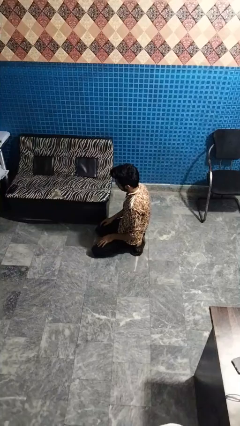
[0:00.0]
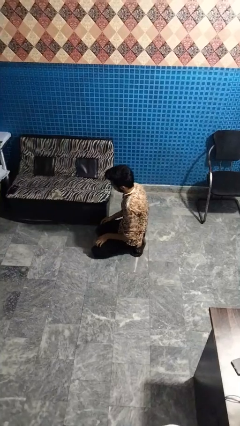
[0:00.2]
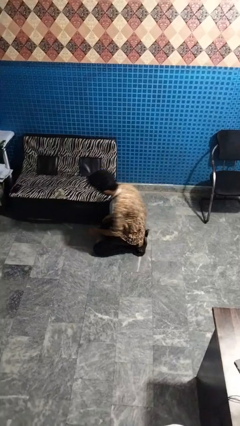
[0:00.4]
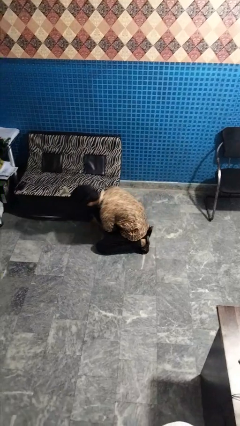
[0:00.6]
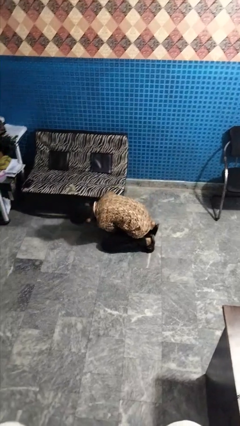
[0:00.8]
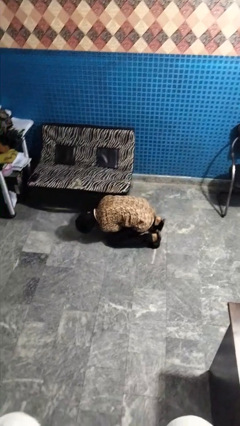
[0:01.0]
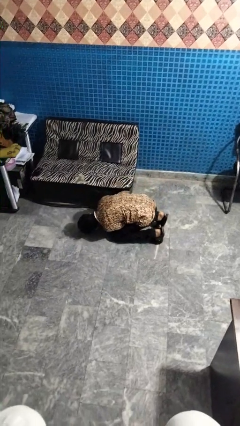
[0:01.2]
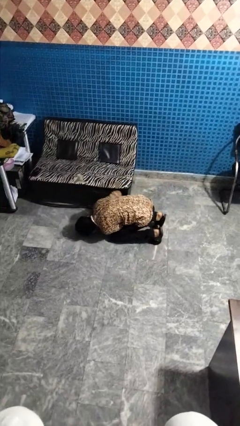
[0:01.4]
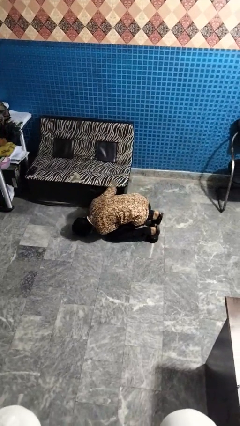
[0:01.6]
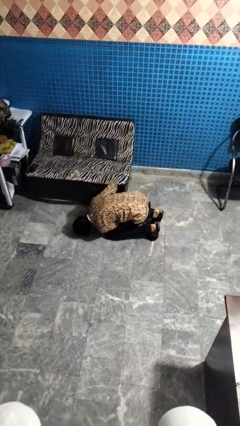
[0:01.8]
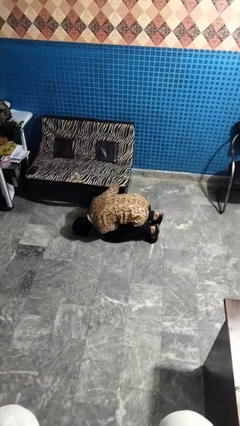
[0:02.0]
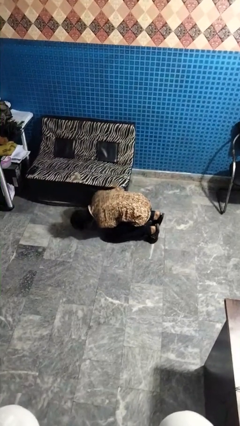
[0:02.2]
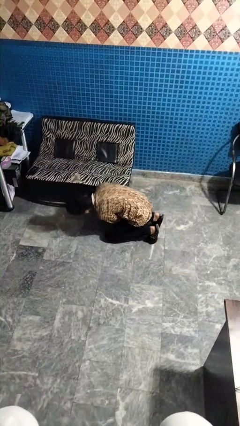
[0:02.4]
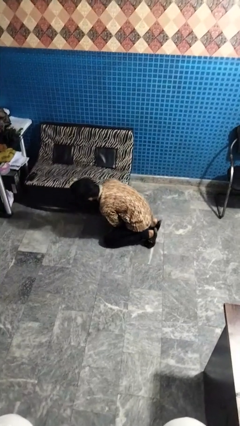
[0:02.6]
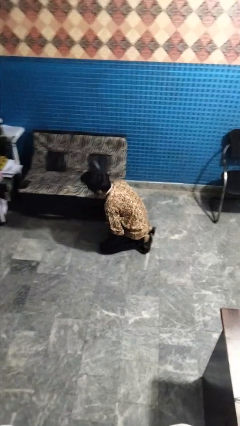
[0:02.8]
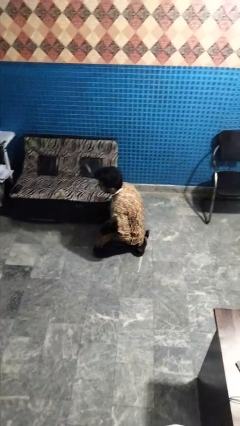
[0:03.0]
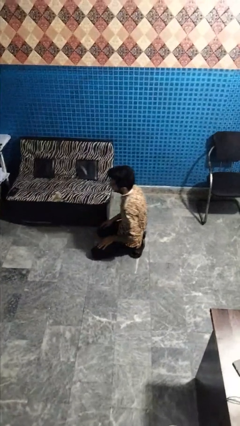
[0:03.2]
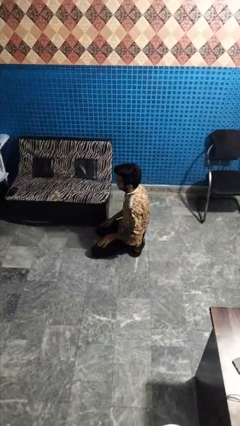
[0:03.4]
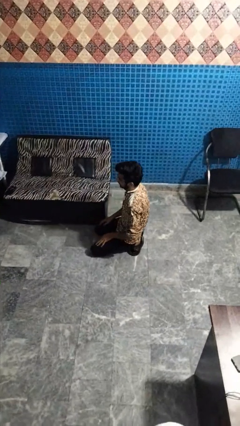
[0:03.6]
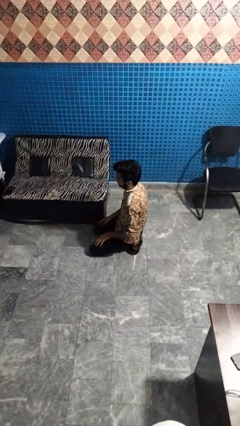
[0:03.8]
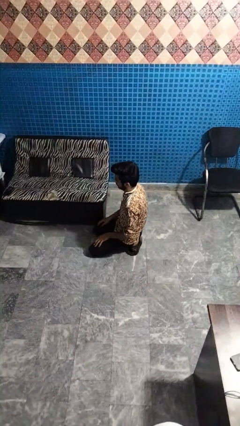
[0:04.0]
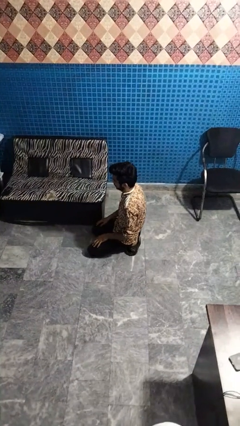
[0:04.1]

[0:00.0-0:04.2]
person searches under couch

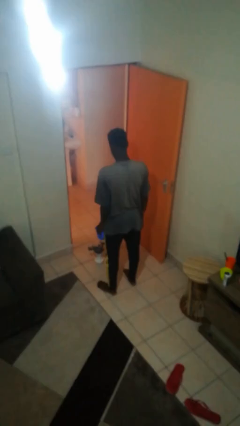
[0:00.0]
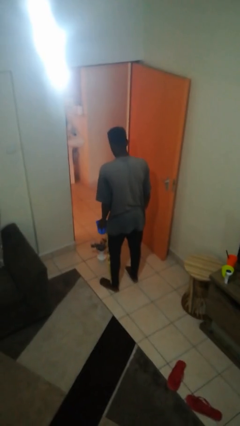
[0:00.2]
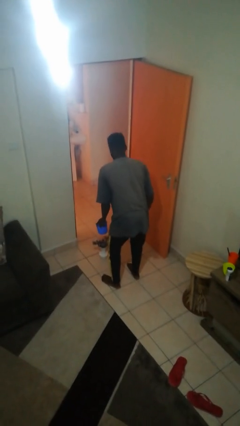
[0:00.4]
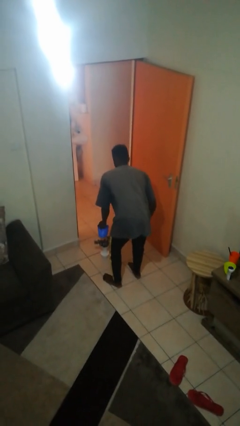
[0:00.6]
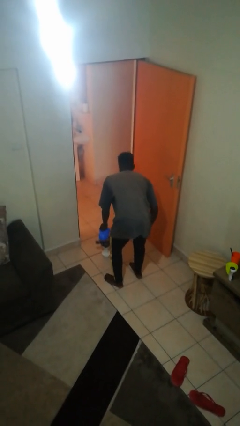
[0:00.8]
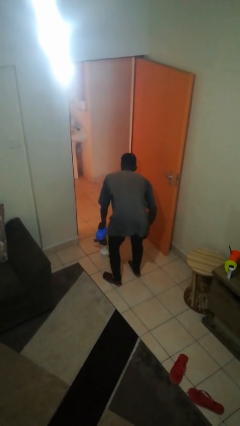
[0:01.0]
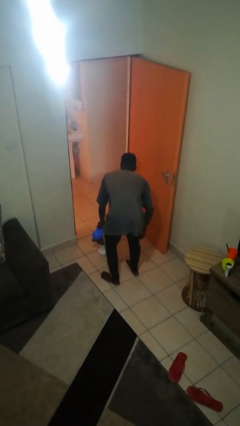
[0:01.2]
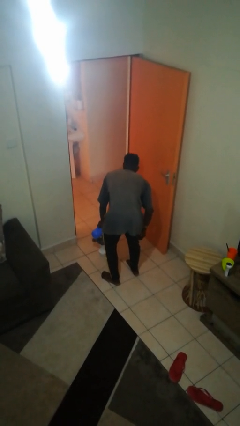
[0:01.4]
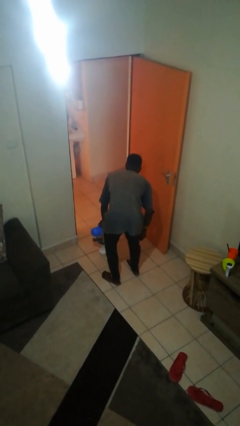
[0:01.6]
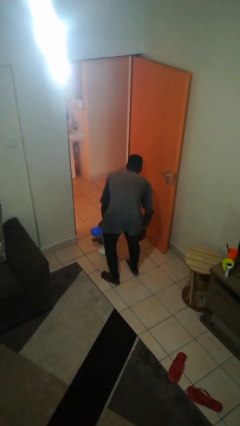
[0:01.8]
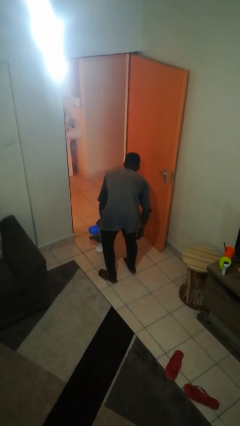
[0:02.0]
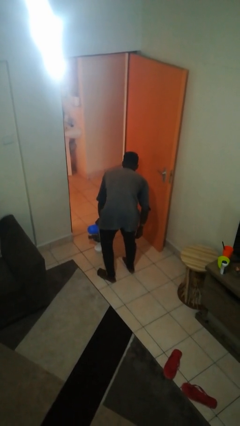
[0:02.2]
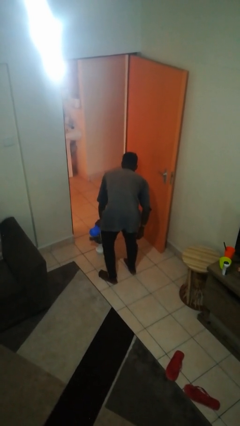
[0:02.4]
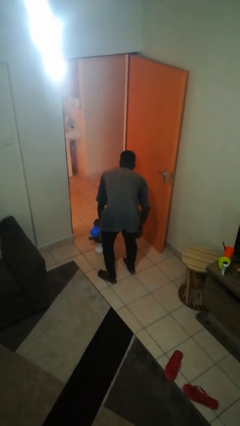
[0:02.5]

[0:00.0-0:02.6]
person waters houseplant

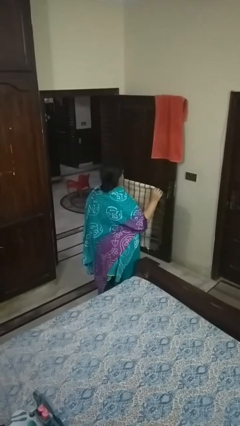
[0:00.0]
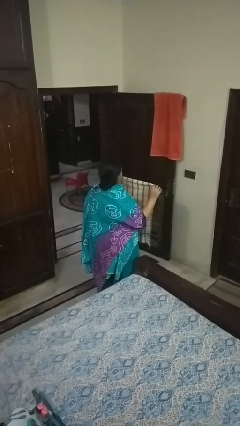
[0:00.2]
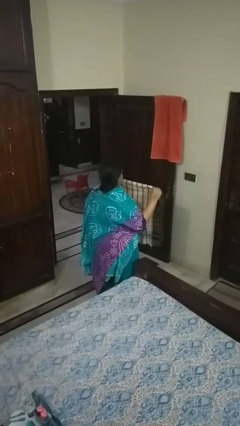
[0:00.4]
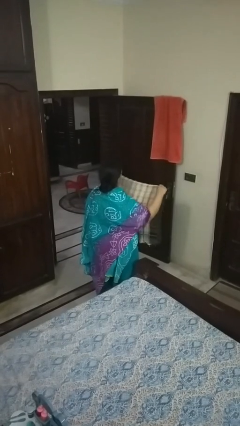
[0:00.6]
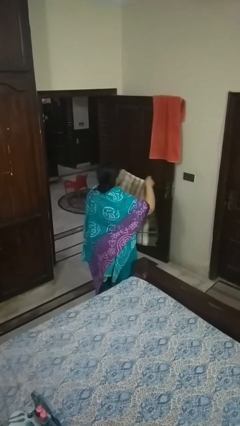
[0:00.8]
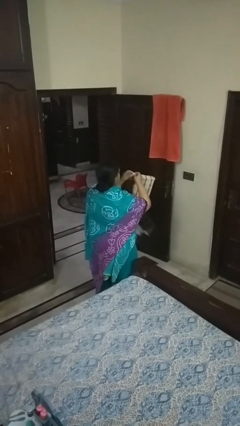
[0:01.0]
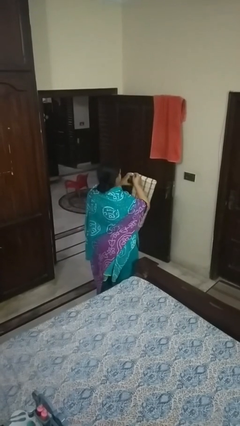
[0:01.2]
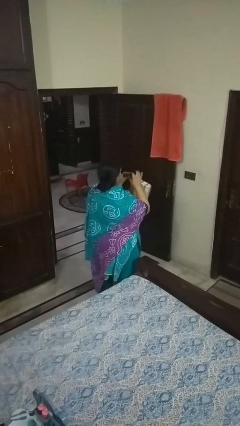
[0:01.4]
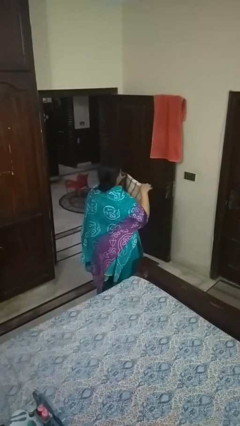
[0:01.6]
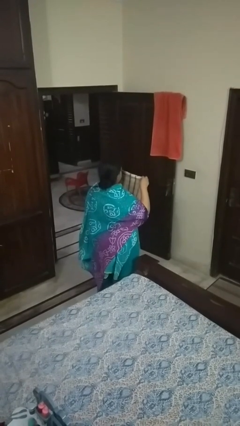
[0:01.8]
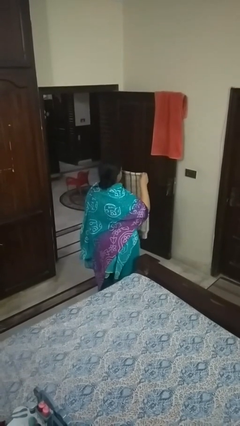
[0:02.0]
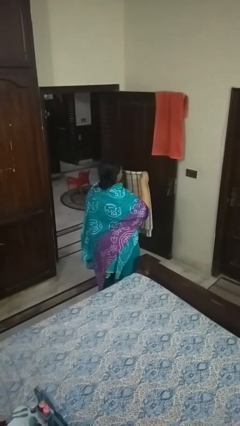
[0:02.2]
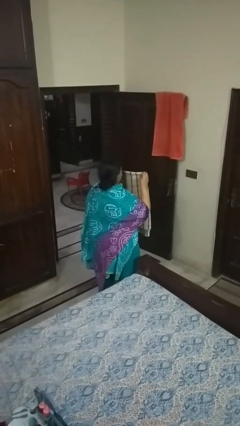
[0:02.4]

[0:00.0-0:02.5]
person folds blanket

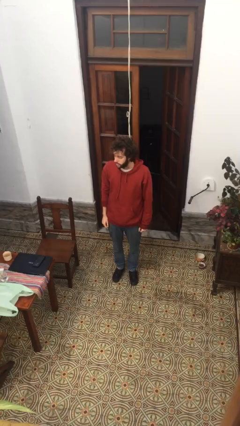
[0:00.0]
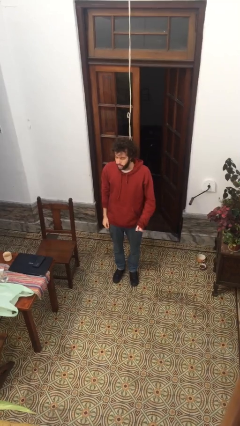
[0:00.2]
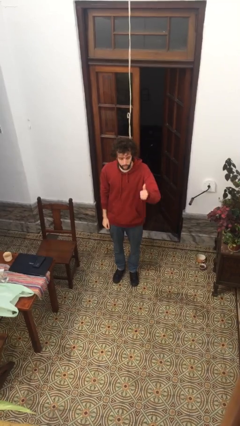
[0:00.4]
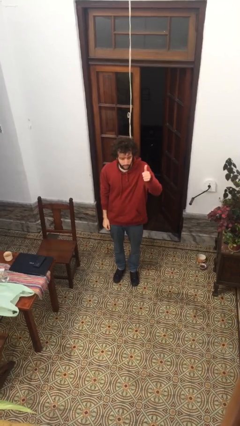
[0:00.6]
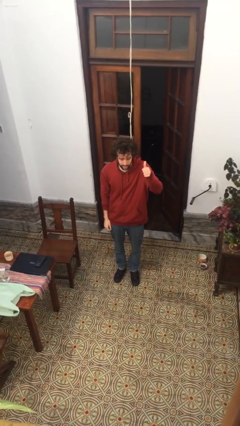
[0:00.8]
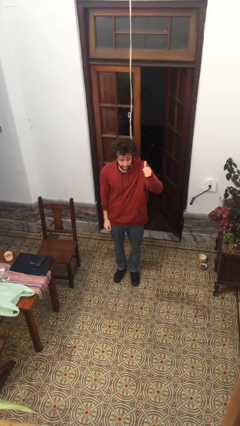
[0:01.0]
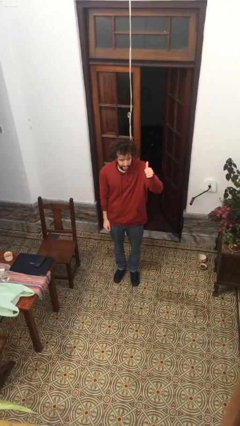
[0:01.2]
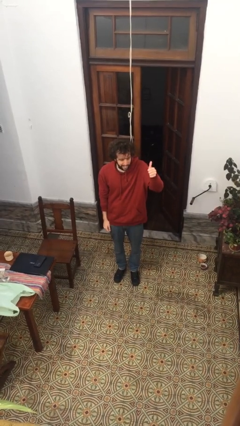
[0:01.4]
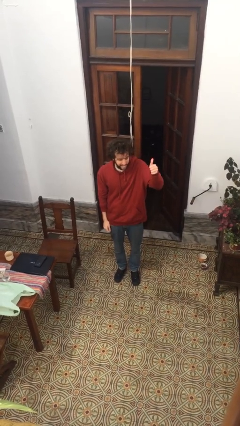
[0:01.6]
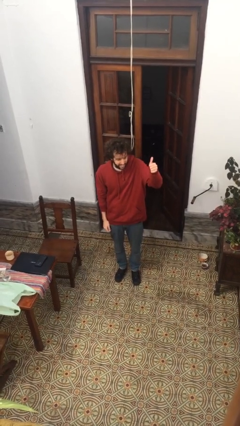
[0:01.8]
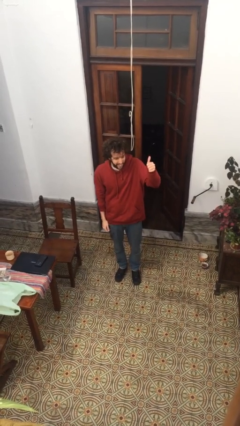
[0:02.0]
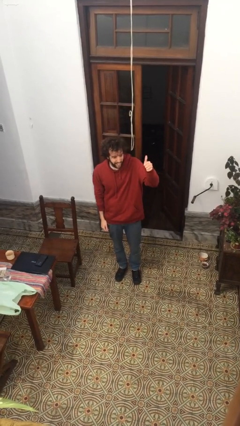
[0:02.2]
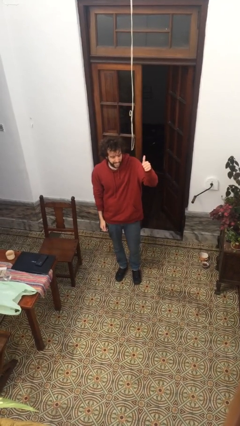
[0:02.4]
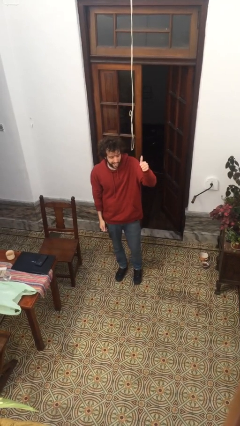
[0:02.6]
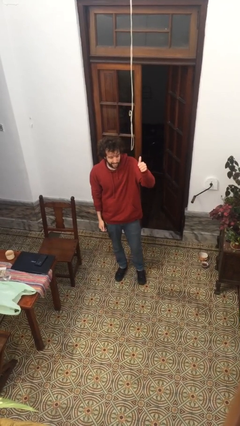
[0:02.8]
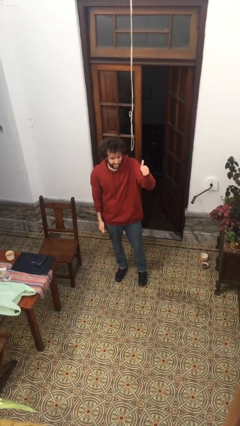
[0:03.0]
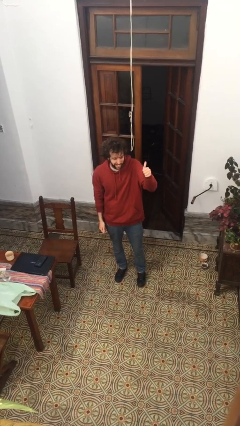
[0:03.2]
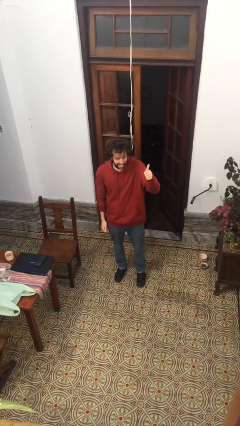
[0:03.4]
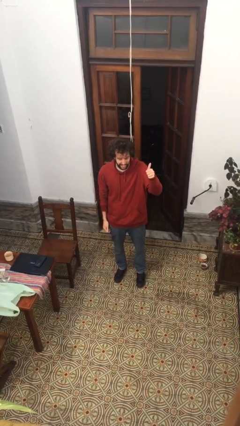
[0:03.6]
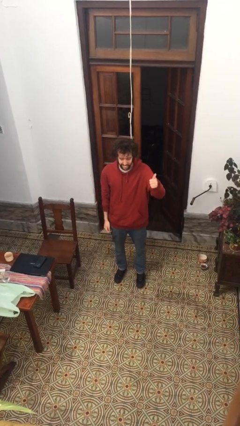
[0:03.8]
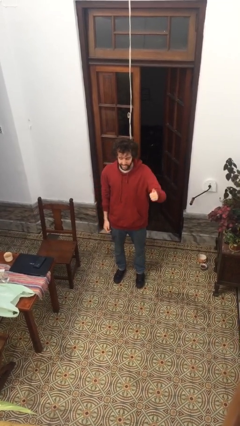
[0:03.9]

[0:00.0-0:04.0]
person gestures thumbs up

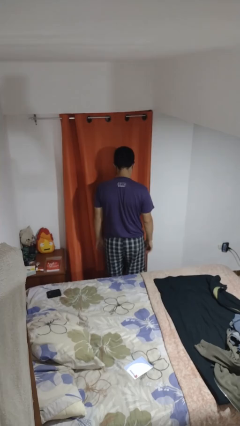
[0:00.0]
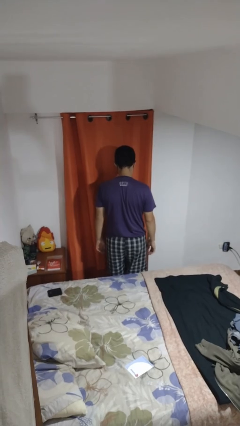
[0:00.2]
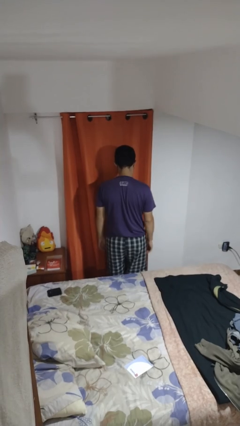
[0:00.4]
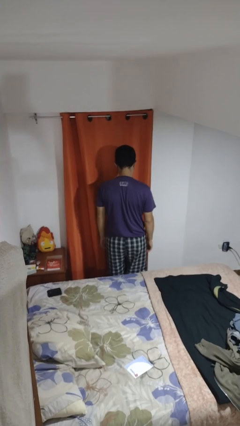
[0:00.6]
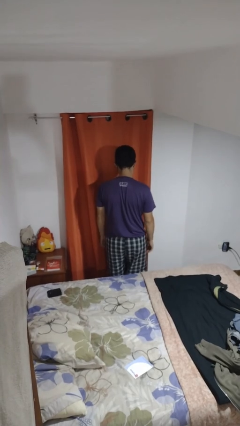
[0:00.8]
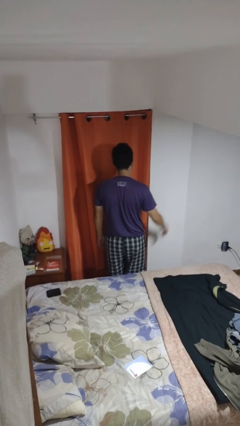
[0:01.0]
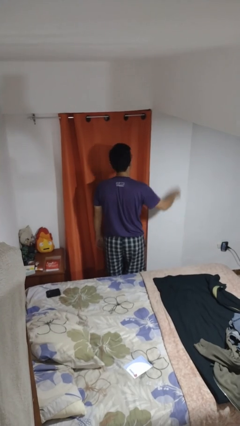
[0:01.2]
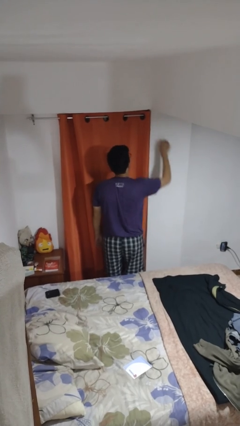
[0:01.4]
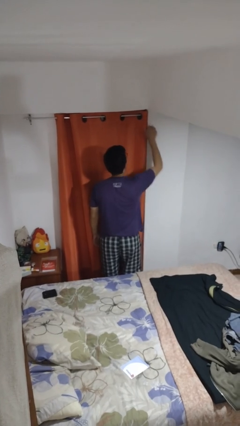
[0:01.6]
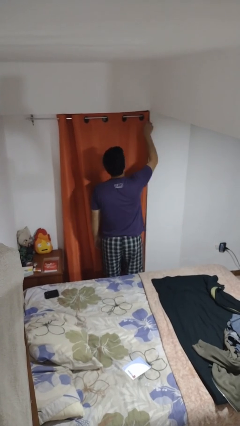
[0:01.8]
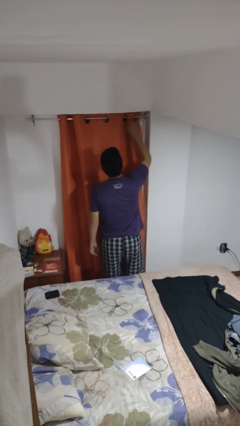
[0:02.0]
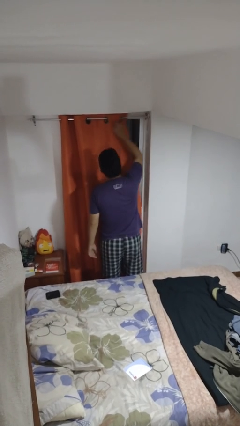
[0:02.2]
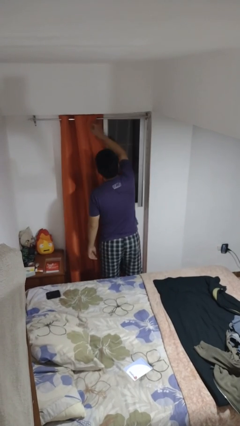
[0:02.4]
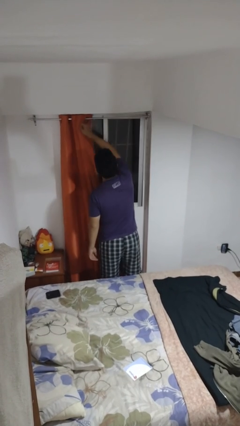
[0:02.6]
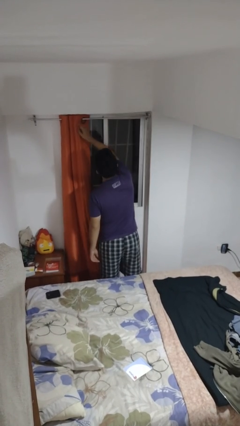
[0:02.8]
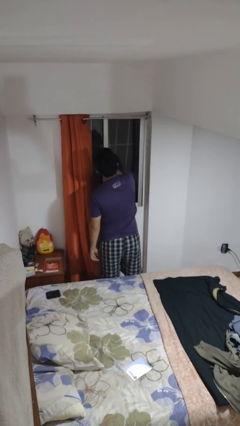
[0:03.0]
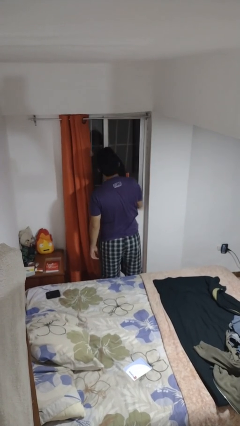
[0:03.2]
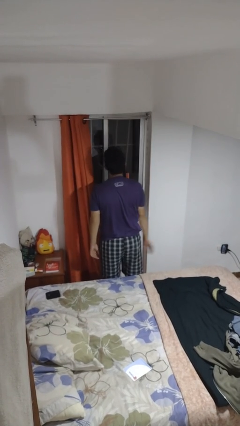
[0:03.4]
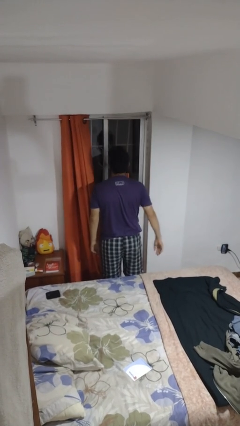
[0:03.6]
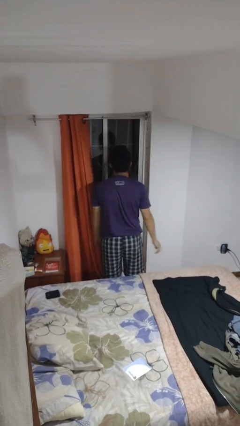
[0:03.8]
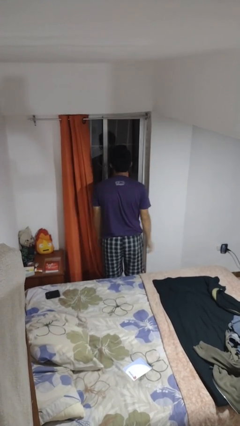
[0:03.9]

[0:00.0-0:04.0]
person opens curtains

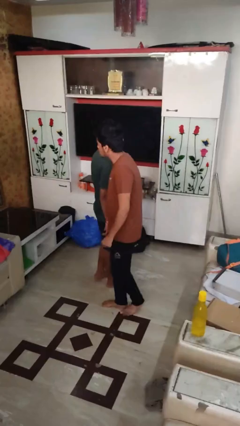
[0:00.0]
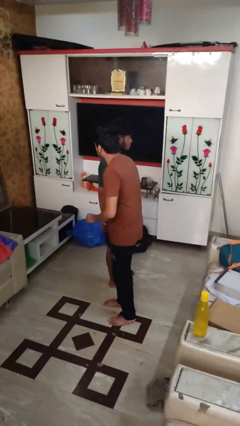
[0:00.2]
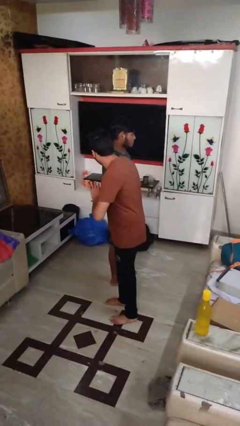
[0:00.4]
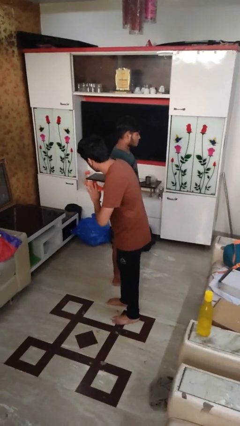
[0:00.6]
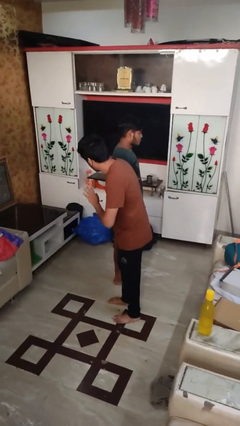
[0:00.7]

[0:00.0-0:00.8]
person bumps into person
